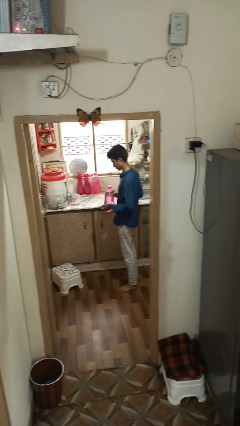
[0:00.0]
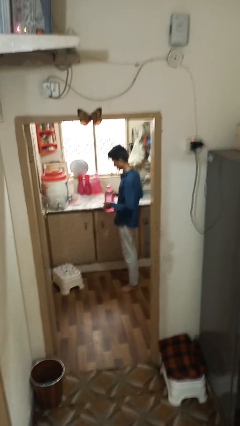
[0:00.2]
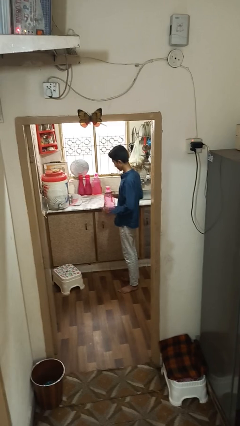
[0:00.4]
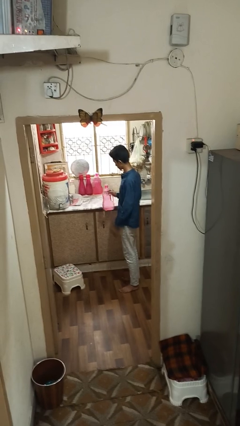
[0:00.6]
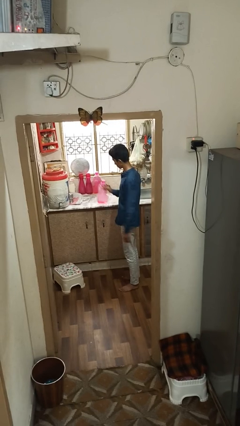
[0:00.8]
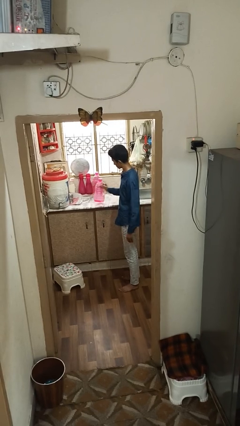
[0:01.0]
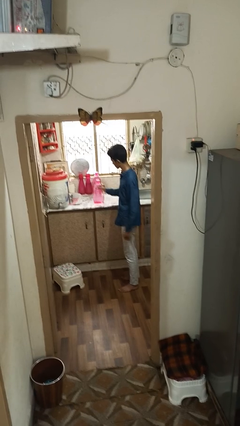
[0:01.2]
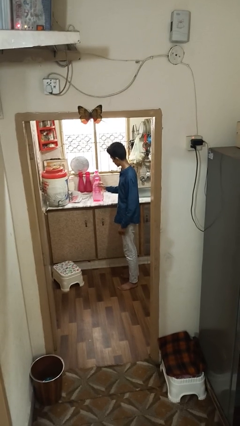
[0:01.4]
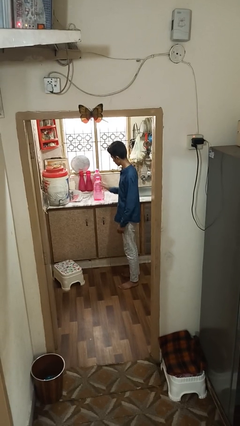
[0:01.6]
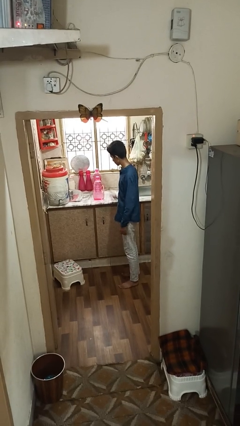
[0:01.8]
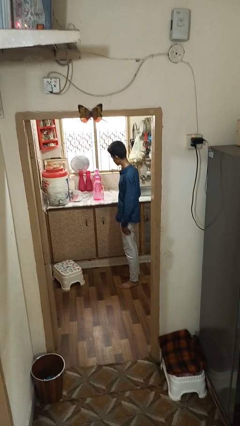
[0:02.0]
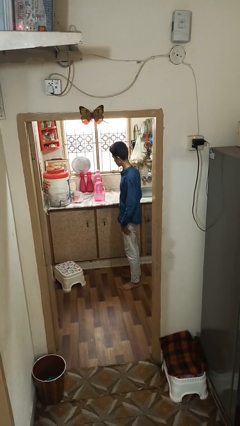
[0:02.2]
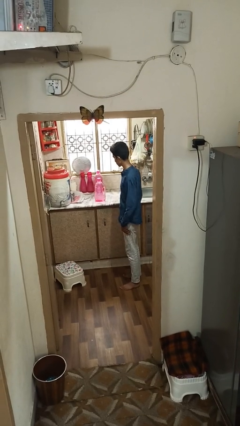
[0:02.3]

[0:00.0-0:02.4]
person puts down object on countertop

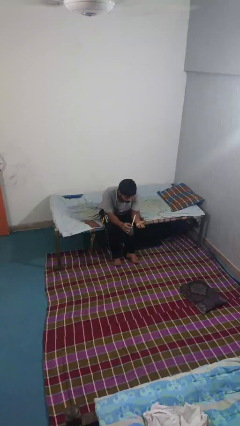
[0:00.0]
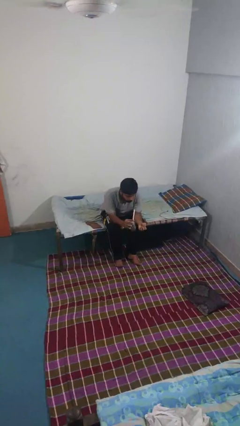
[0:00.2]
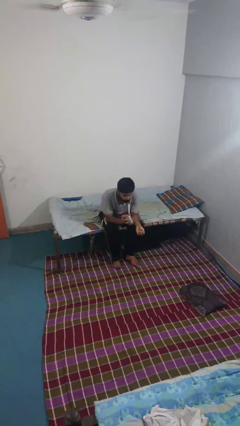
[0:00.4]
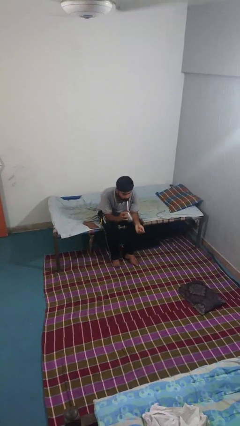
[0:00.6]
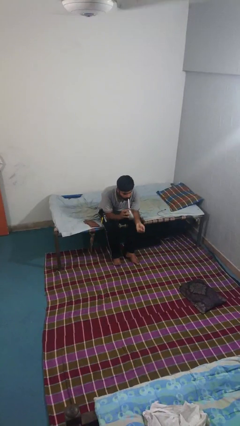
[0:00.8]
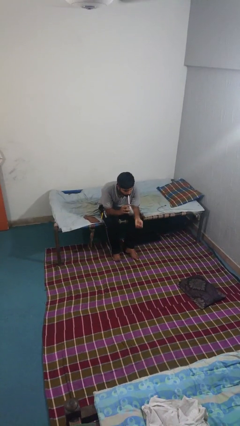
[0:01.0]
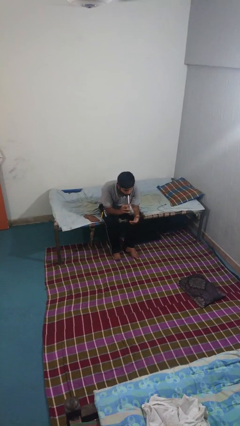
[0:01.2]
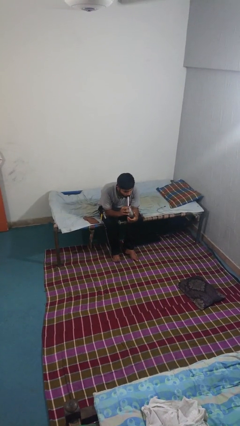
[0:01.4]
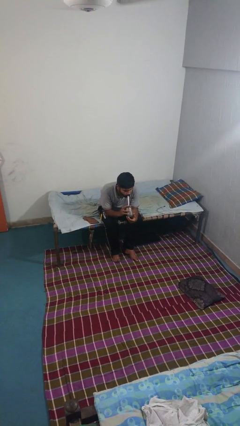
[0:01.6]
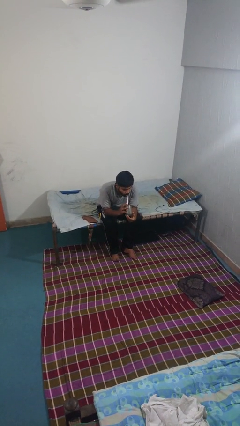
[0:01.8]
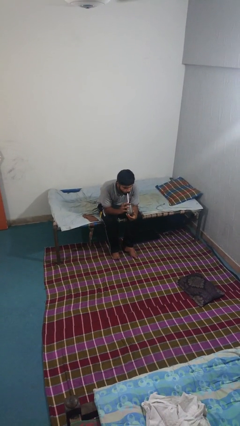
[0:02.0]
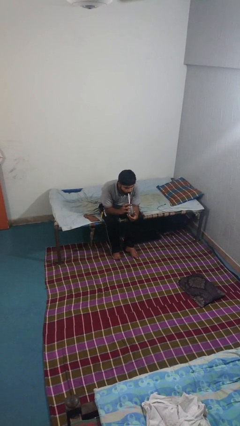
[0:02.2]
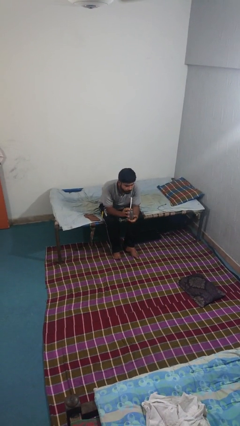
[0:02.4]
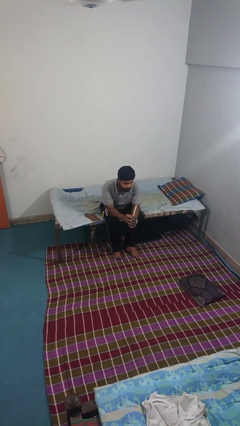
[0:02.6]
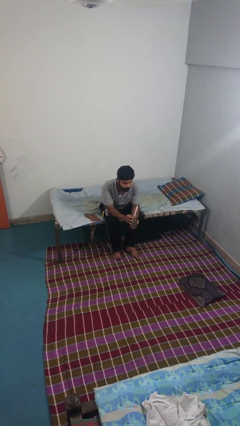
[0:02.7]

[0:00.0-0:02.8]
person drinks from straw

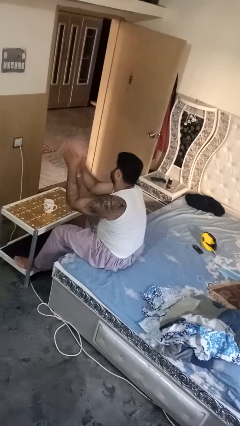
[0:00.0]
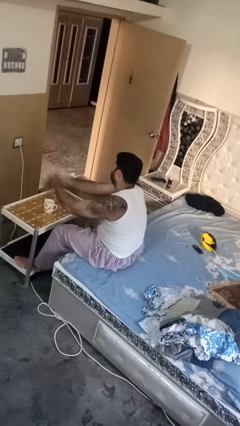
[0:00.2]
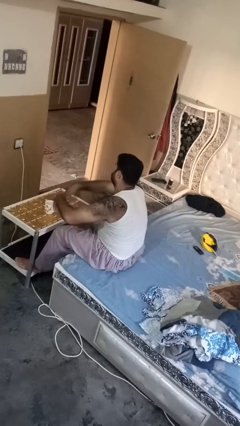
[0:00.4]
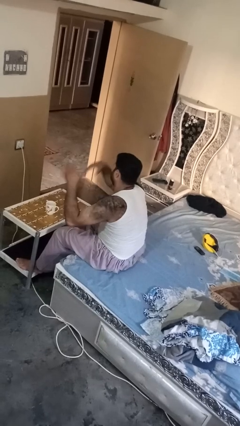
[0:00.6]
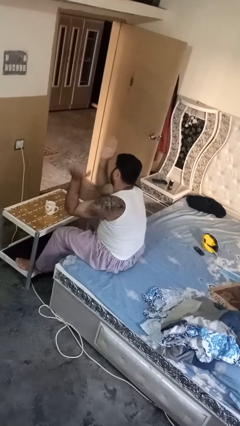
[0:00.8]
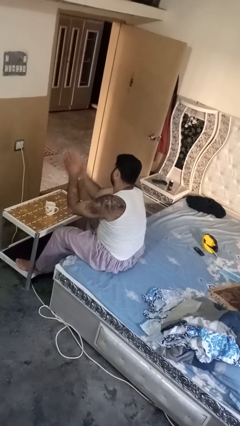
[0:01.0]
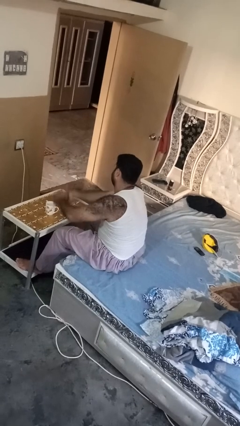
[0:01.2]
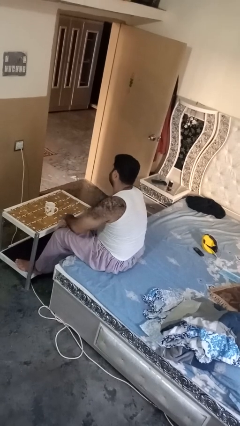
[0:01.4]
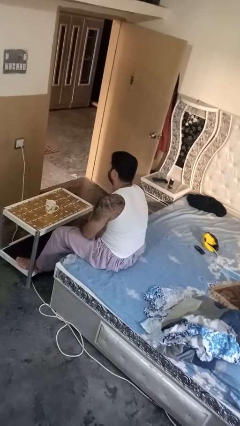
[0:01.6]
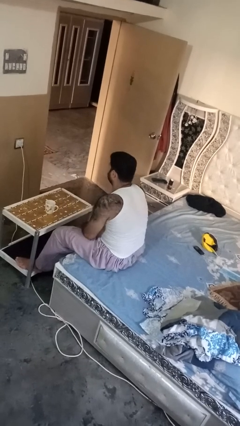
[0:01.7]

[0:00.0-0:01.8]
person claps hands

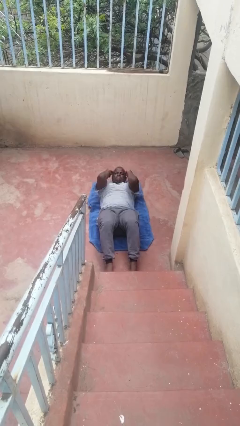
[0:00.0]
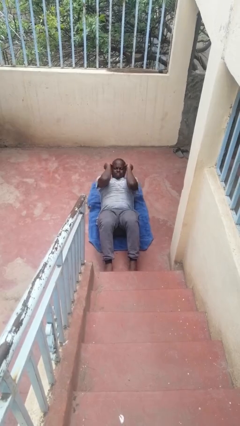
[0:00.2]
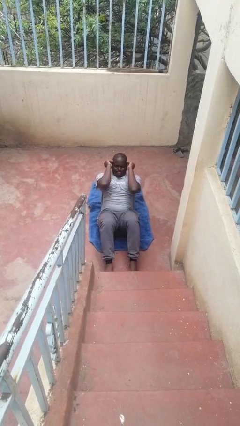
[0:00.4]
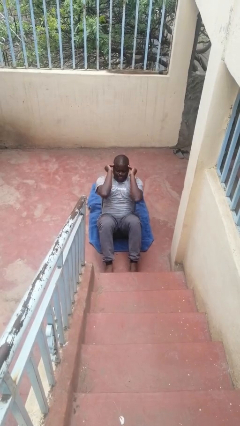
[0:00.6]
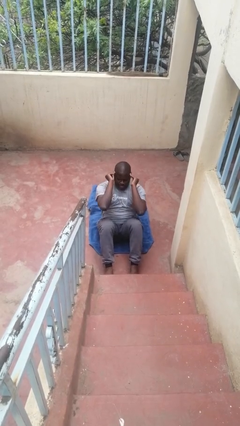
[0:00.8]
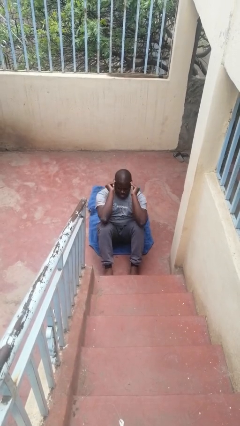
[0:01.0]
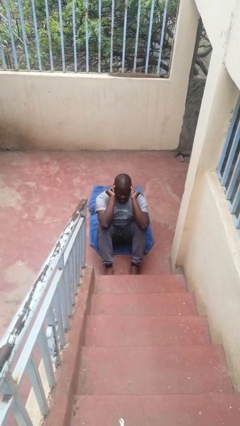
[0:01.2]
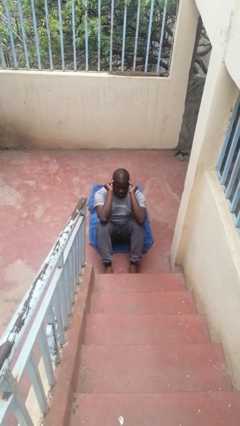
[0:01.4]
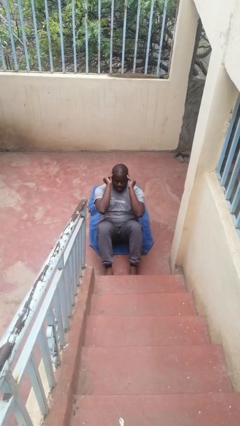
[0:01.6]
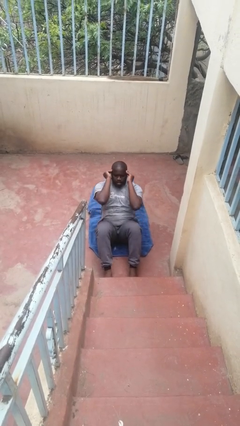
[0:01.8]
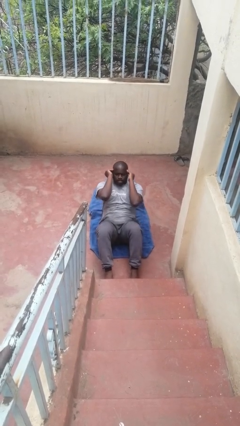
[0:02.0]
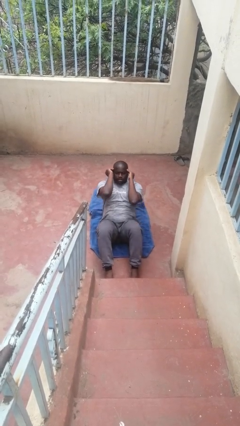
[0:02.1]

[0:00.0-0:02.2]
person exercises with situp

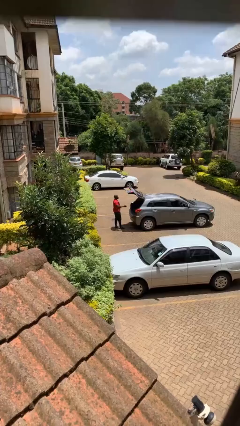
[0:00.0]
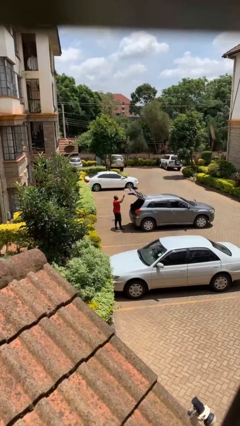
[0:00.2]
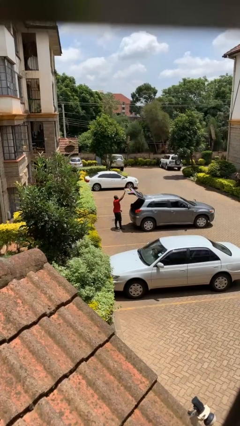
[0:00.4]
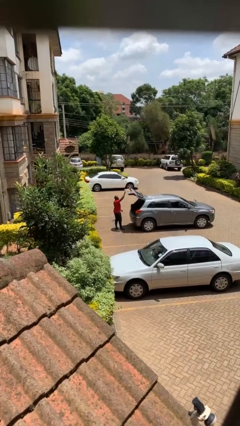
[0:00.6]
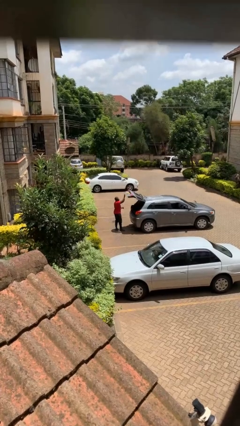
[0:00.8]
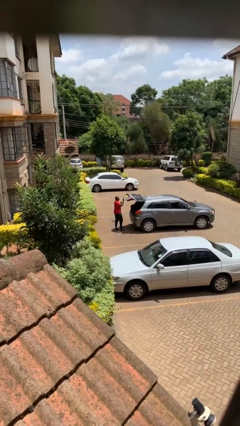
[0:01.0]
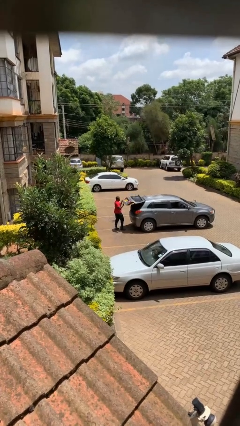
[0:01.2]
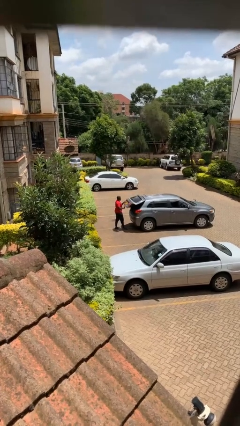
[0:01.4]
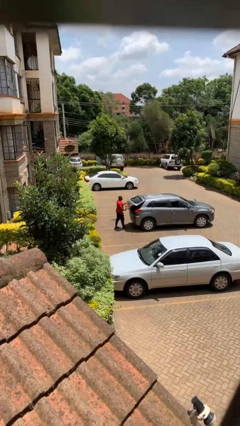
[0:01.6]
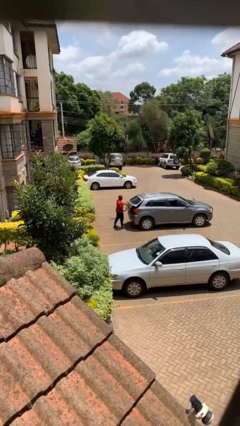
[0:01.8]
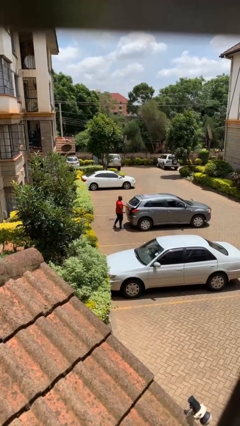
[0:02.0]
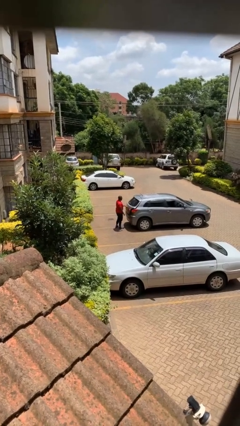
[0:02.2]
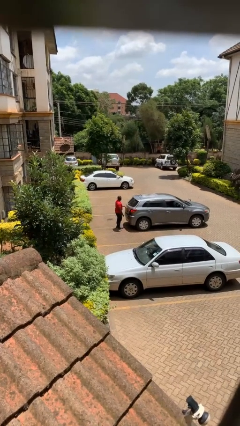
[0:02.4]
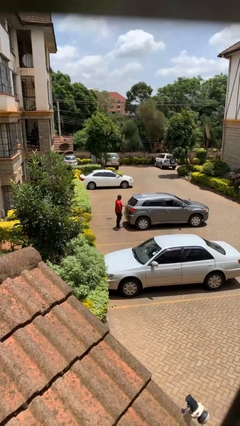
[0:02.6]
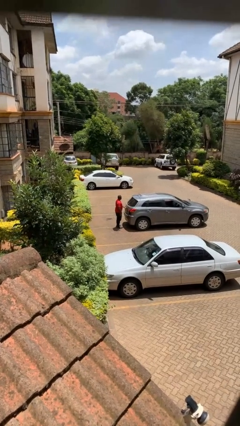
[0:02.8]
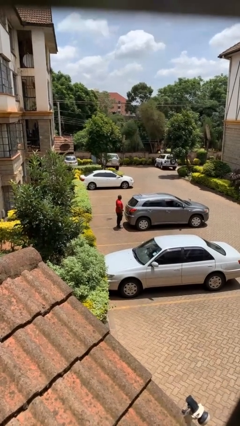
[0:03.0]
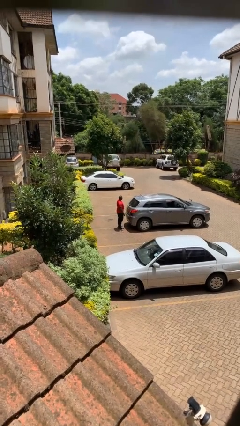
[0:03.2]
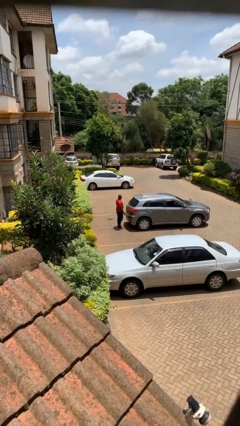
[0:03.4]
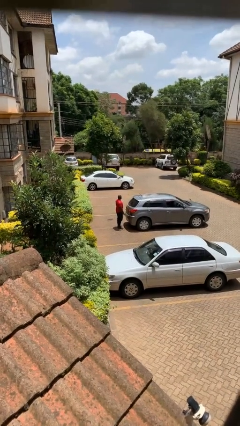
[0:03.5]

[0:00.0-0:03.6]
person closes car trunk

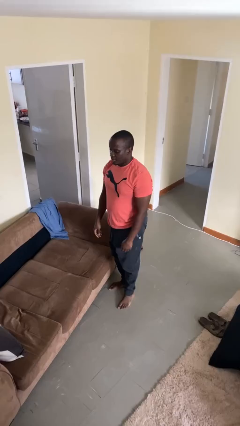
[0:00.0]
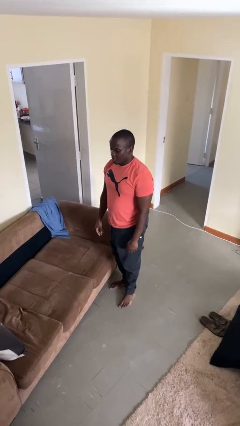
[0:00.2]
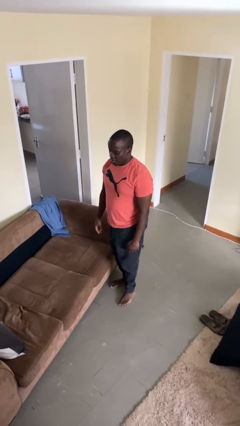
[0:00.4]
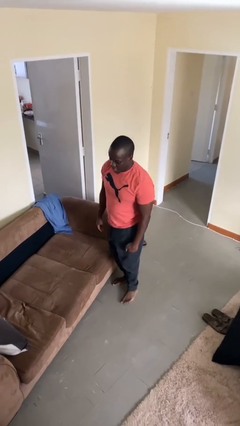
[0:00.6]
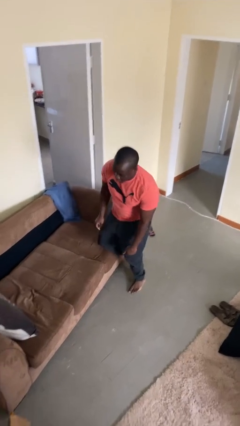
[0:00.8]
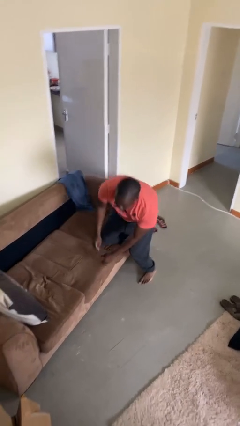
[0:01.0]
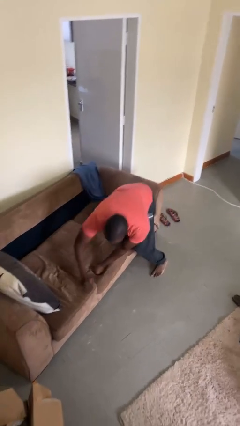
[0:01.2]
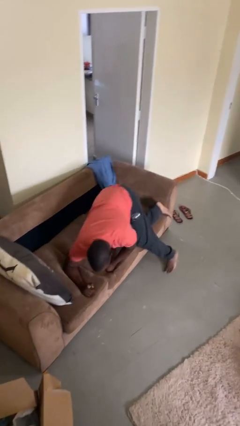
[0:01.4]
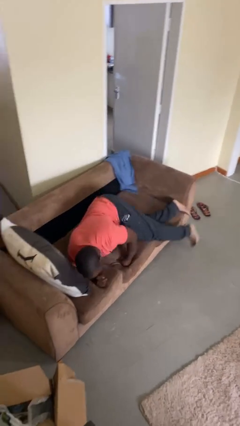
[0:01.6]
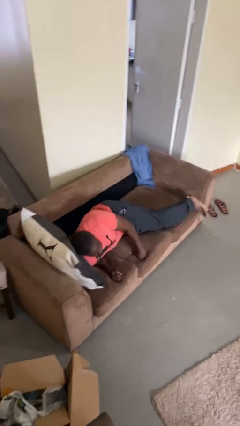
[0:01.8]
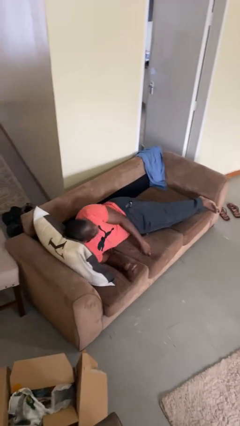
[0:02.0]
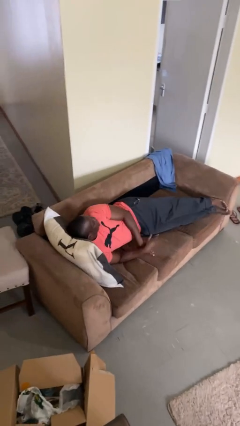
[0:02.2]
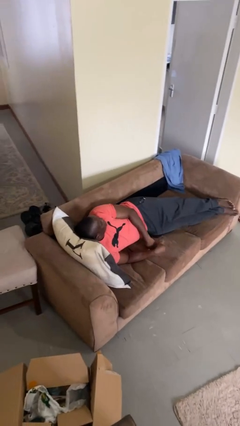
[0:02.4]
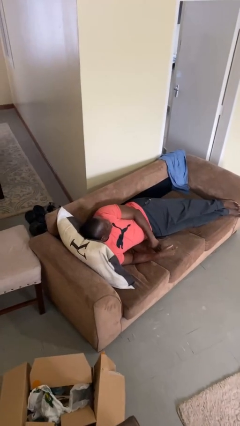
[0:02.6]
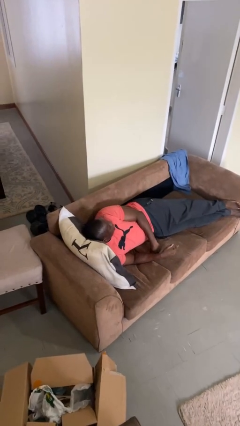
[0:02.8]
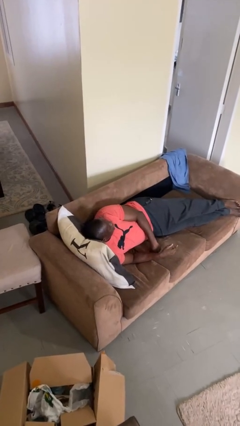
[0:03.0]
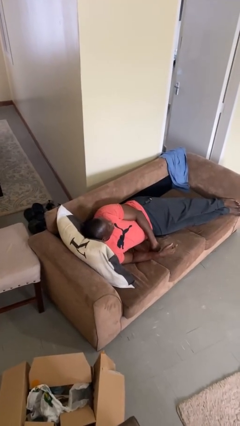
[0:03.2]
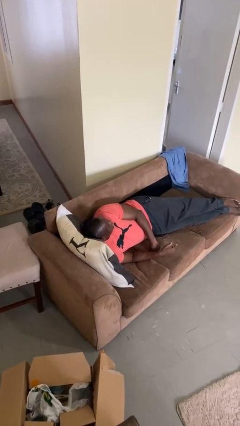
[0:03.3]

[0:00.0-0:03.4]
person lies down on couch

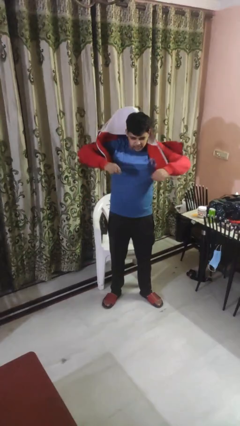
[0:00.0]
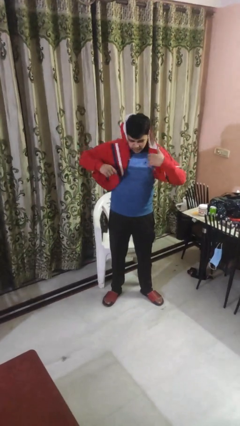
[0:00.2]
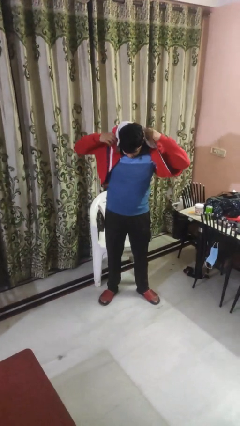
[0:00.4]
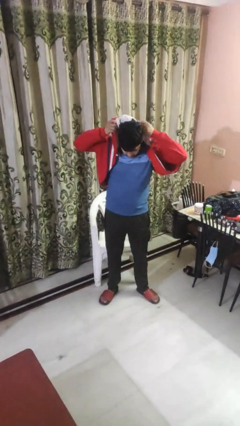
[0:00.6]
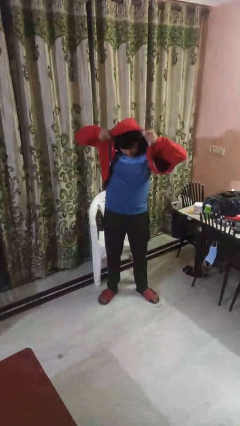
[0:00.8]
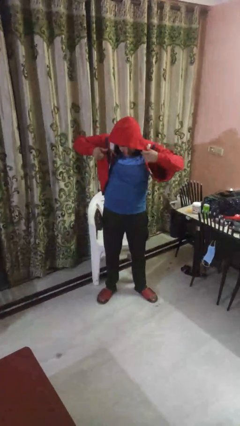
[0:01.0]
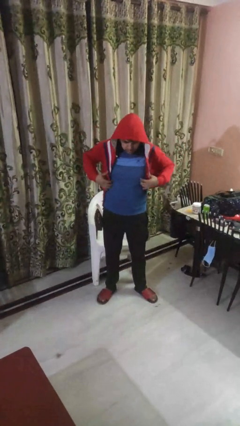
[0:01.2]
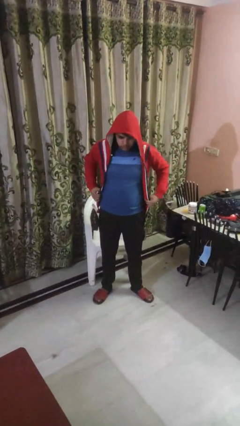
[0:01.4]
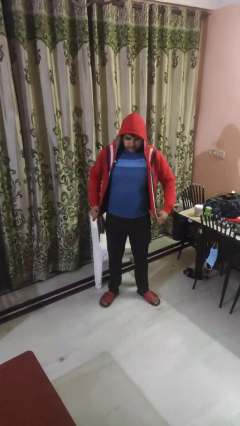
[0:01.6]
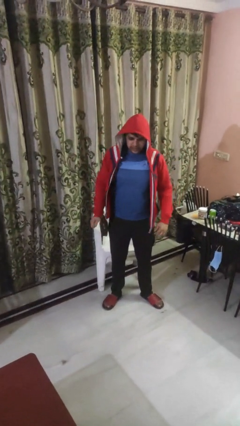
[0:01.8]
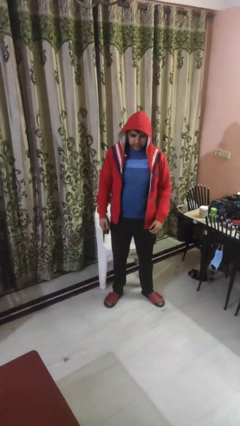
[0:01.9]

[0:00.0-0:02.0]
person puts on hoodie
